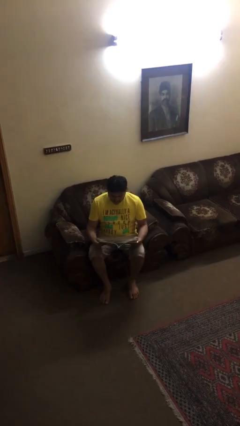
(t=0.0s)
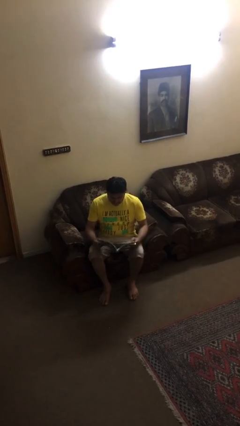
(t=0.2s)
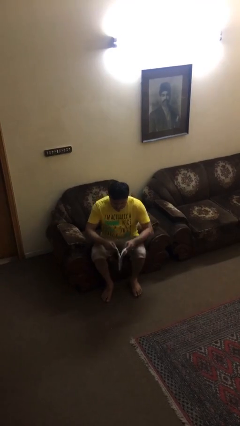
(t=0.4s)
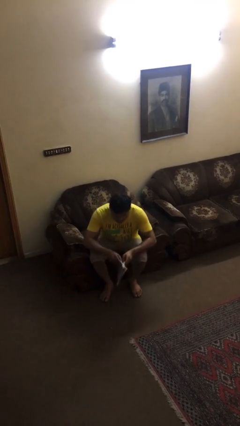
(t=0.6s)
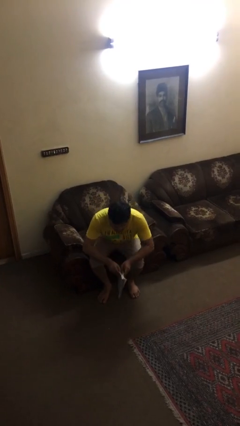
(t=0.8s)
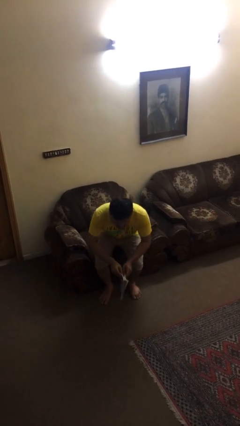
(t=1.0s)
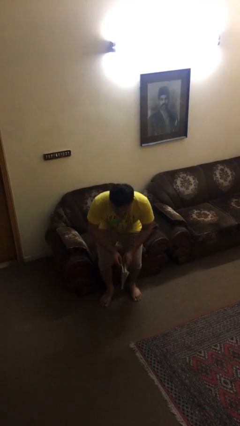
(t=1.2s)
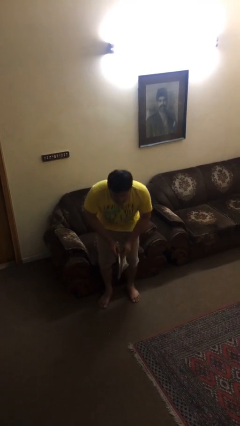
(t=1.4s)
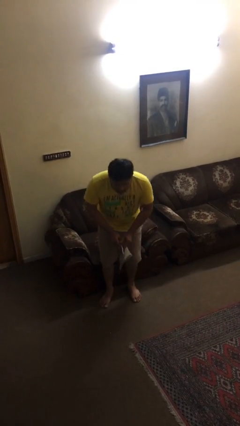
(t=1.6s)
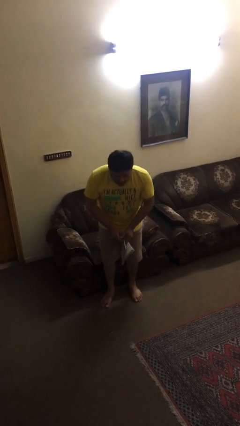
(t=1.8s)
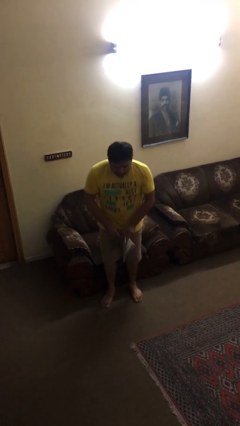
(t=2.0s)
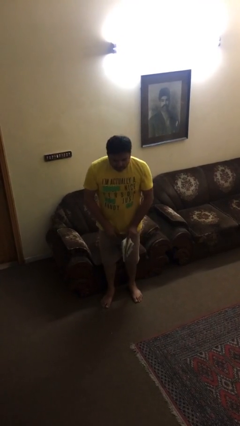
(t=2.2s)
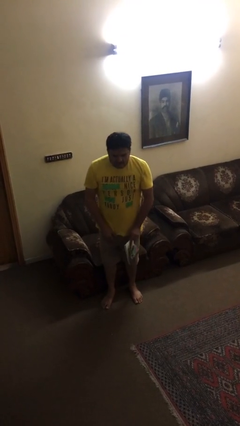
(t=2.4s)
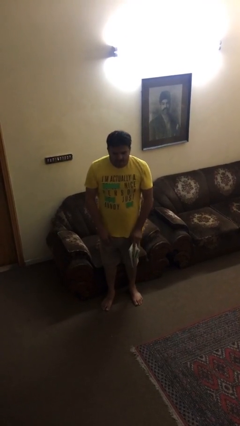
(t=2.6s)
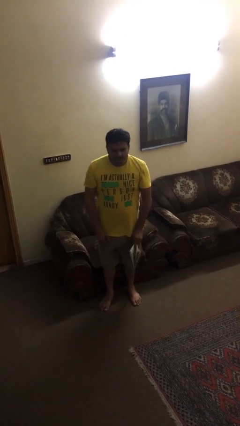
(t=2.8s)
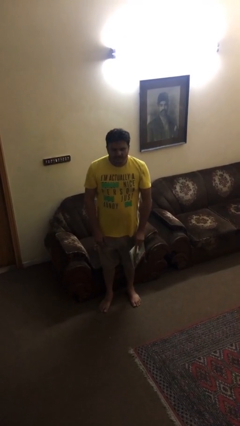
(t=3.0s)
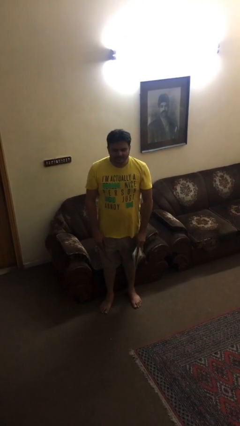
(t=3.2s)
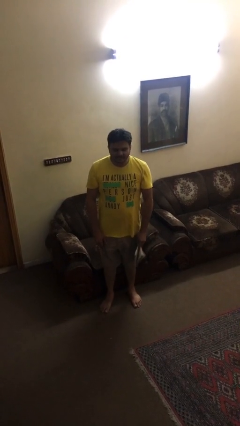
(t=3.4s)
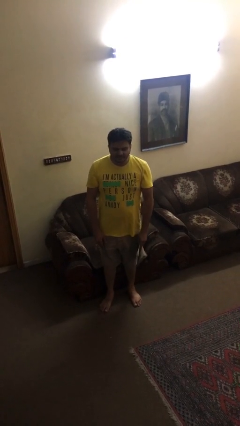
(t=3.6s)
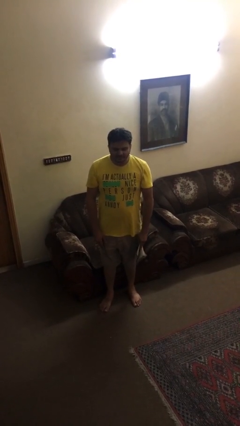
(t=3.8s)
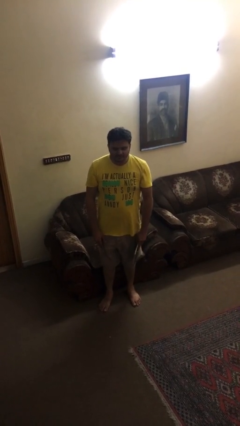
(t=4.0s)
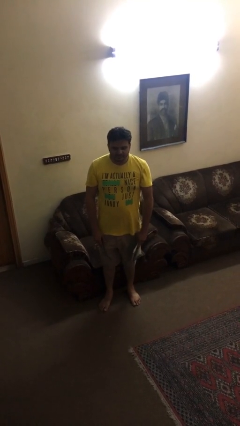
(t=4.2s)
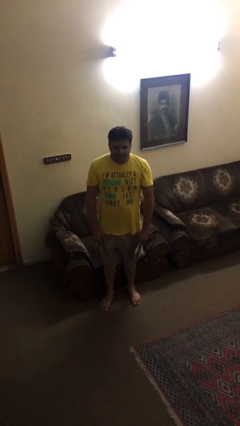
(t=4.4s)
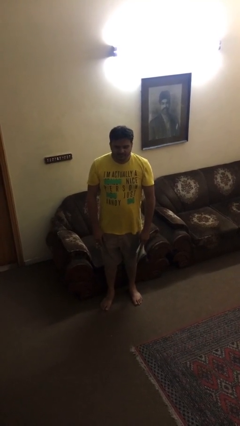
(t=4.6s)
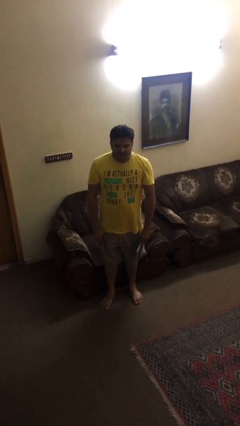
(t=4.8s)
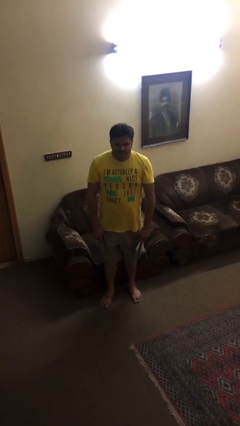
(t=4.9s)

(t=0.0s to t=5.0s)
person stands up

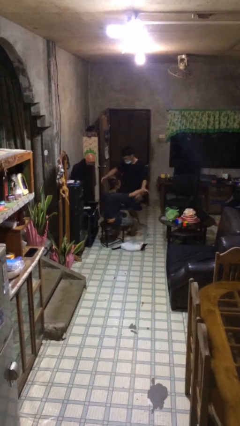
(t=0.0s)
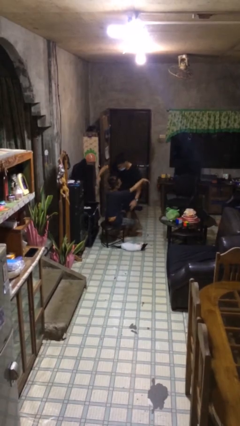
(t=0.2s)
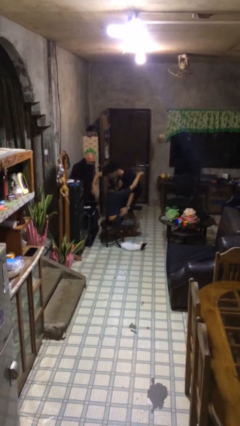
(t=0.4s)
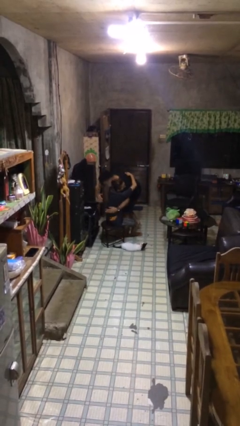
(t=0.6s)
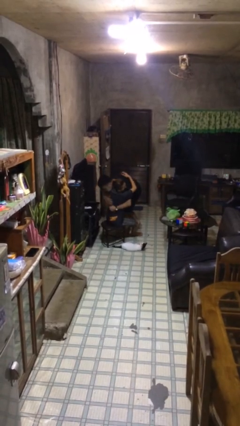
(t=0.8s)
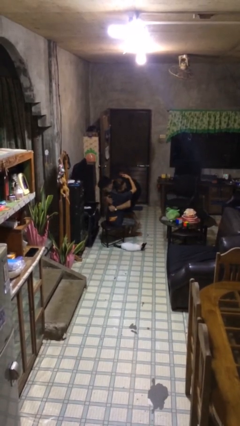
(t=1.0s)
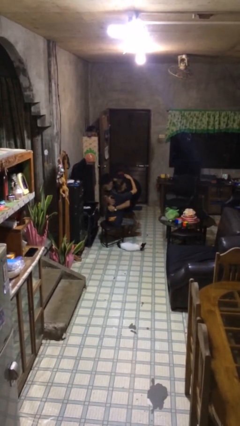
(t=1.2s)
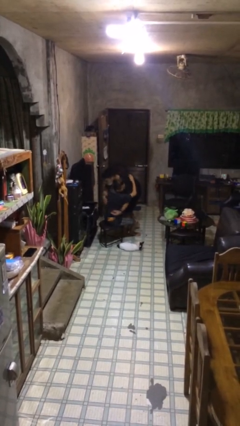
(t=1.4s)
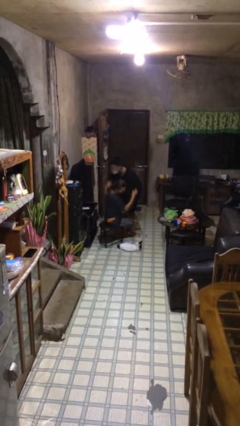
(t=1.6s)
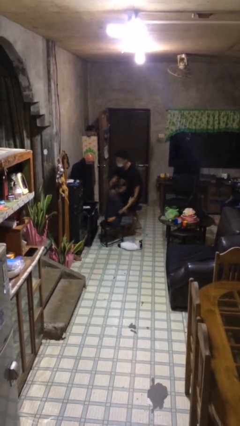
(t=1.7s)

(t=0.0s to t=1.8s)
person embraces person

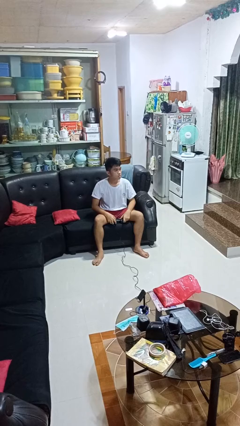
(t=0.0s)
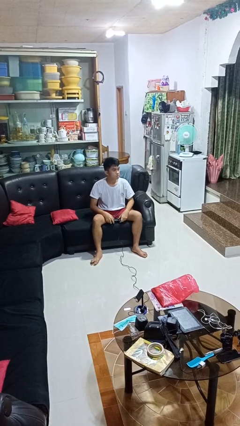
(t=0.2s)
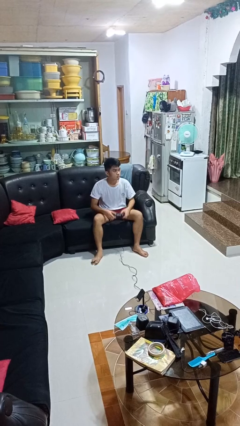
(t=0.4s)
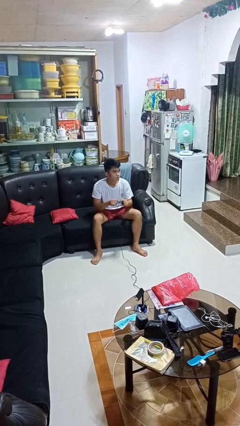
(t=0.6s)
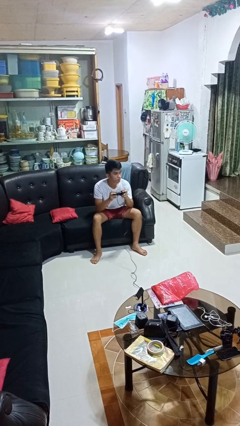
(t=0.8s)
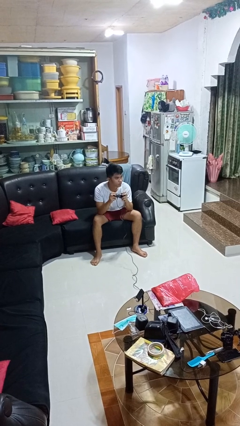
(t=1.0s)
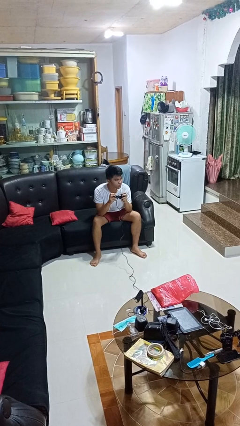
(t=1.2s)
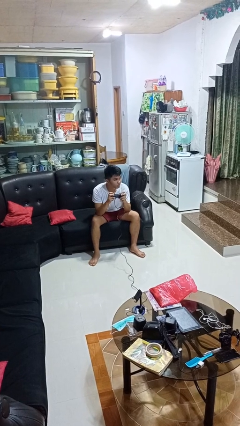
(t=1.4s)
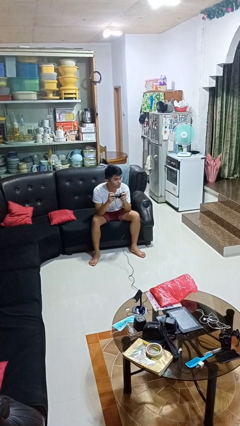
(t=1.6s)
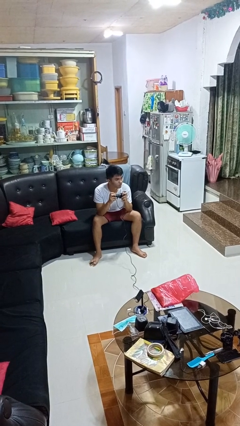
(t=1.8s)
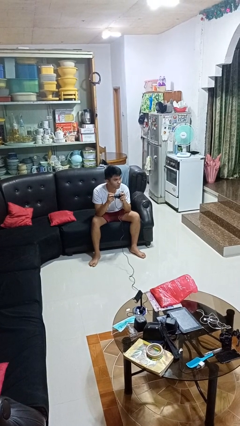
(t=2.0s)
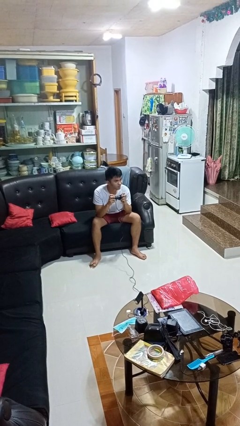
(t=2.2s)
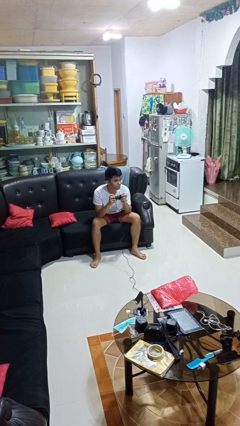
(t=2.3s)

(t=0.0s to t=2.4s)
person interacts with handheld game

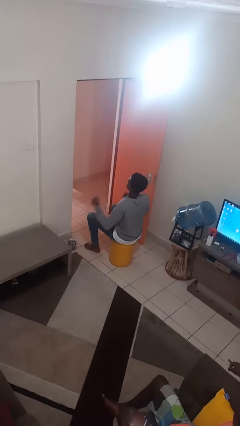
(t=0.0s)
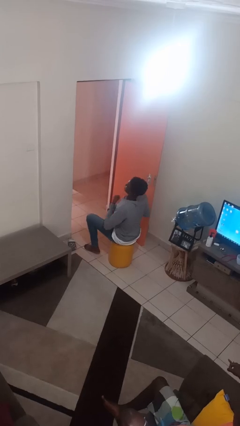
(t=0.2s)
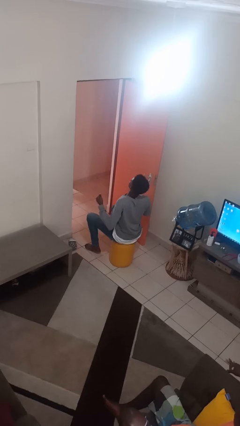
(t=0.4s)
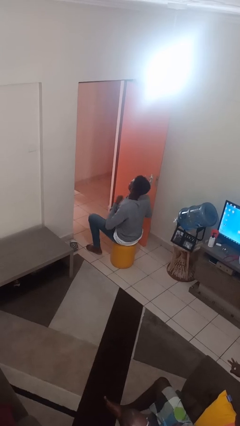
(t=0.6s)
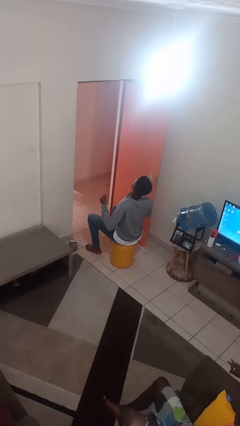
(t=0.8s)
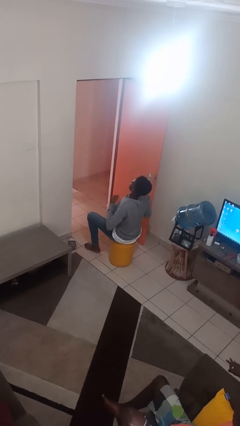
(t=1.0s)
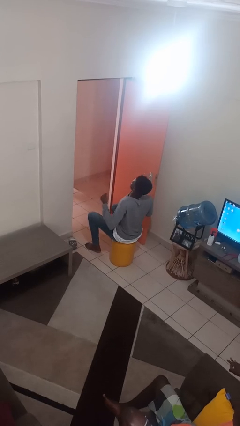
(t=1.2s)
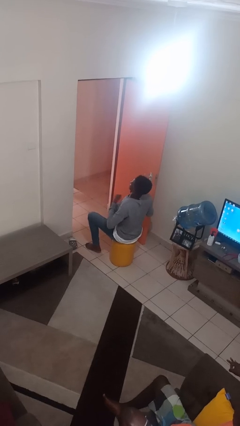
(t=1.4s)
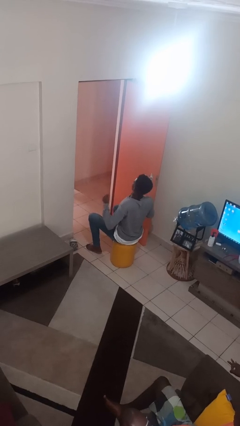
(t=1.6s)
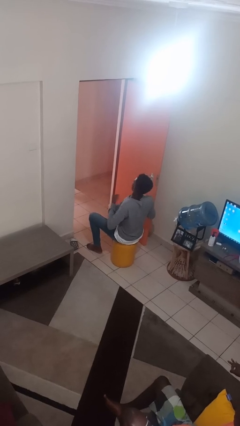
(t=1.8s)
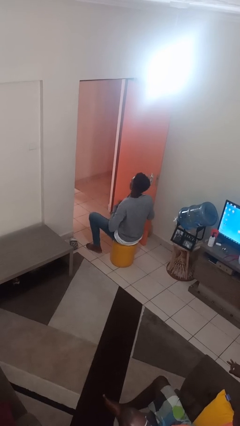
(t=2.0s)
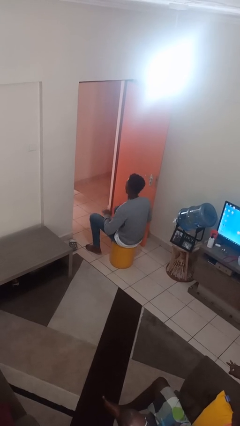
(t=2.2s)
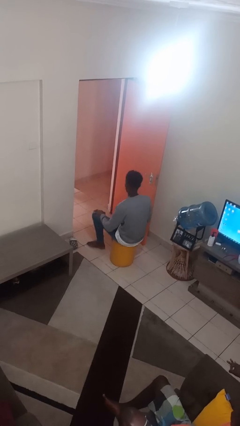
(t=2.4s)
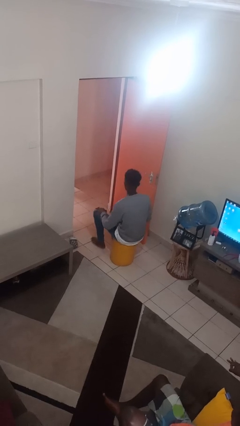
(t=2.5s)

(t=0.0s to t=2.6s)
person drums on chest

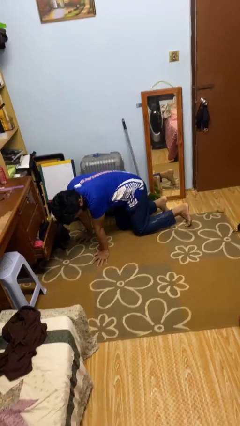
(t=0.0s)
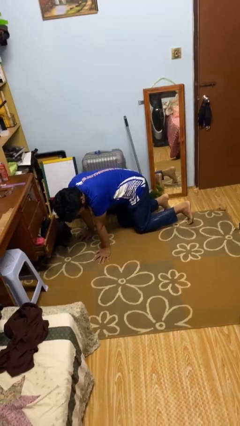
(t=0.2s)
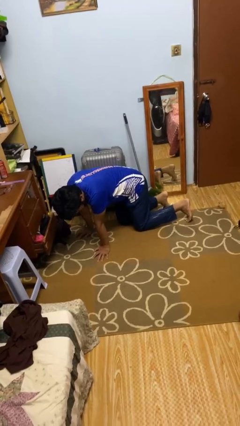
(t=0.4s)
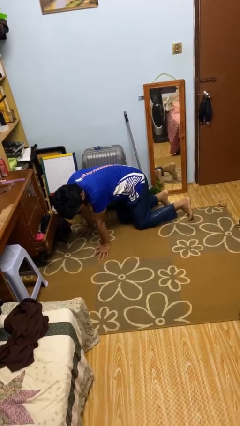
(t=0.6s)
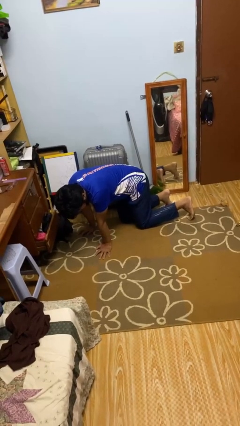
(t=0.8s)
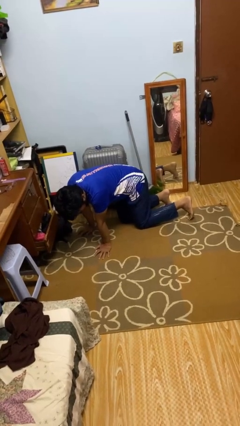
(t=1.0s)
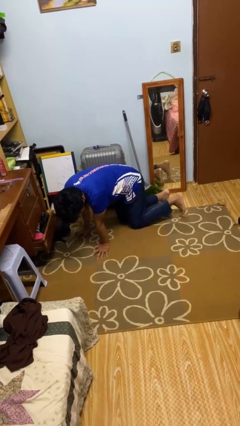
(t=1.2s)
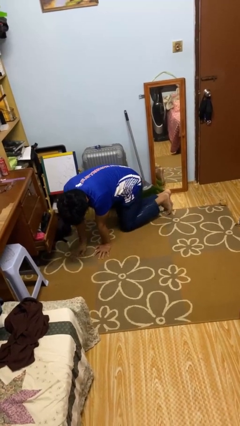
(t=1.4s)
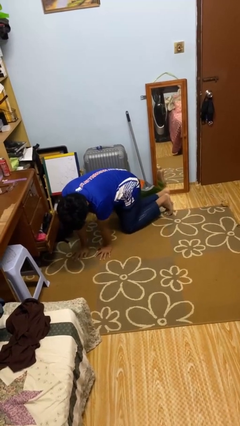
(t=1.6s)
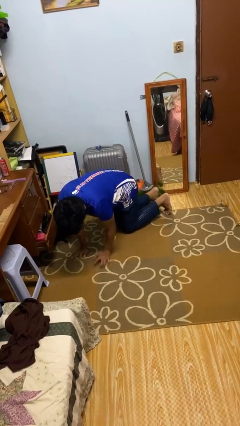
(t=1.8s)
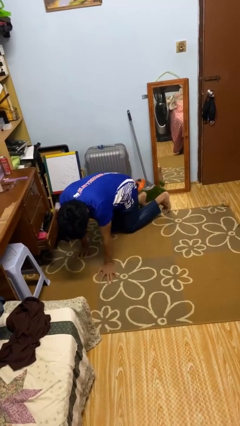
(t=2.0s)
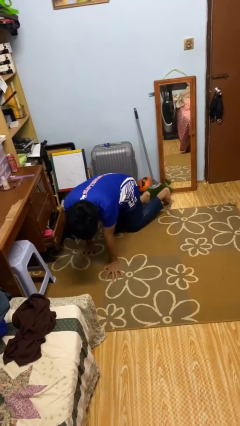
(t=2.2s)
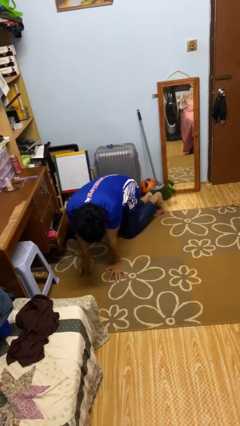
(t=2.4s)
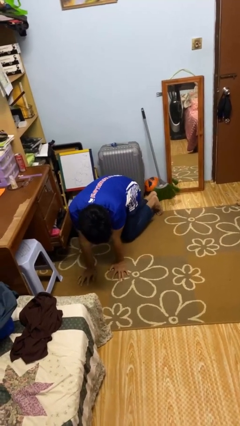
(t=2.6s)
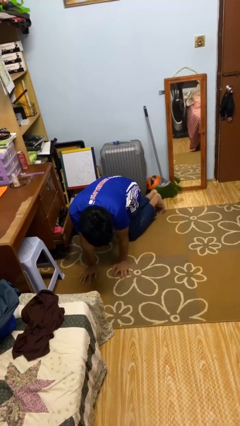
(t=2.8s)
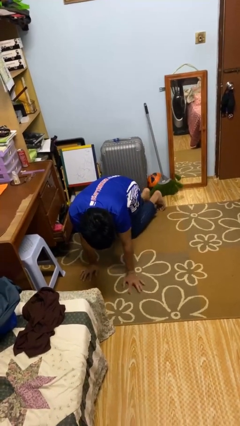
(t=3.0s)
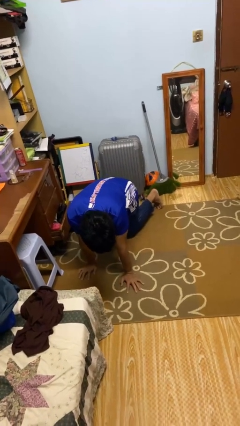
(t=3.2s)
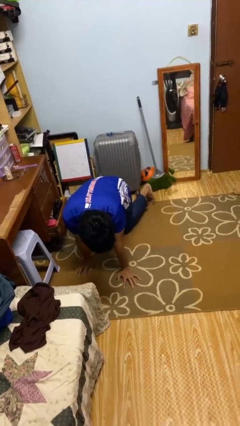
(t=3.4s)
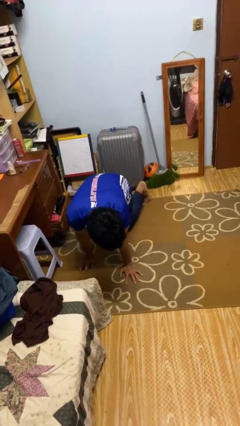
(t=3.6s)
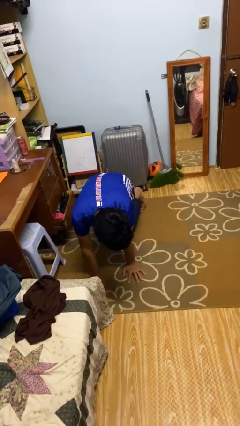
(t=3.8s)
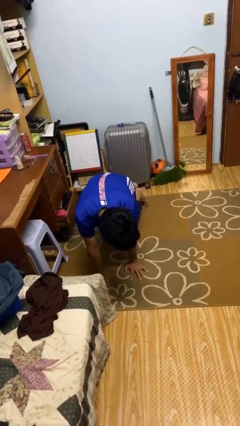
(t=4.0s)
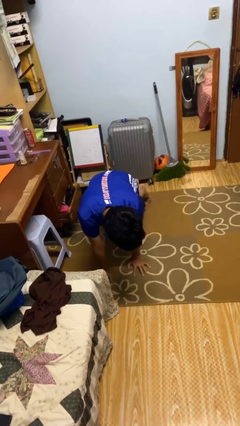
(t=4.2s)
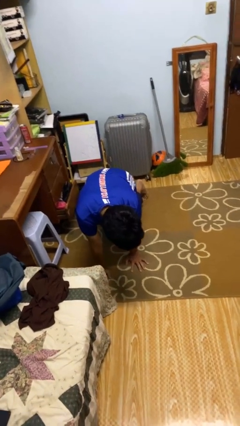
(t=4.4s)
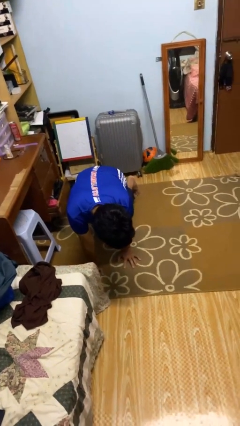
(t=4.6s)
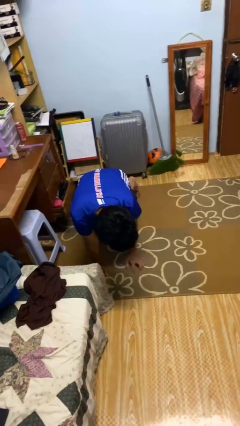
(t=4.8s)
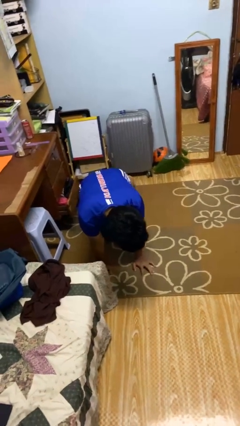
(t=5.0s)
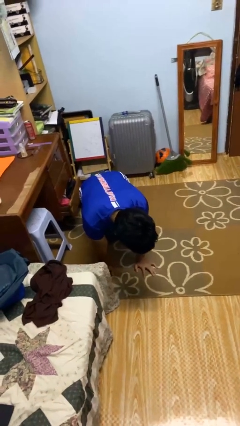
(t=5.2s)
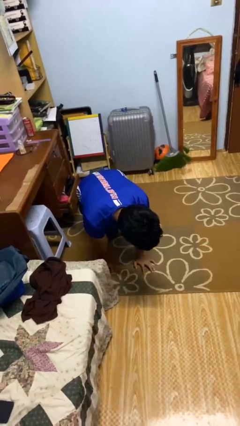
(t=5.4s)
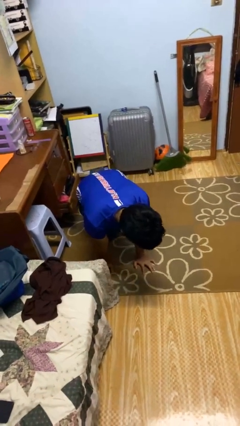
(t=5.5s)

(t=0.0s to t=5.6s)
person crawls
